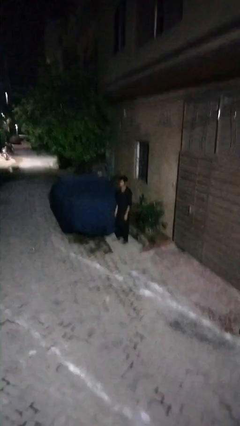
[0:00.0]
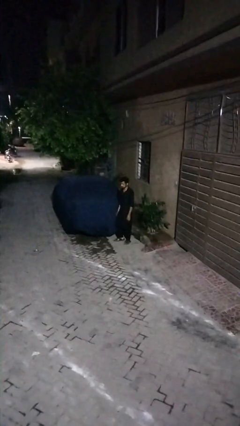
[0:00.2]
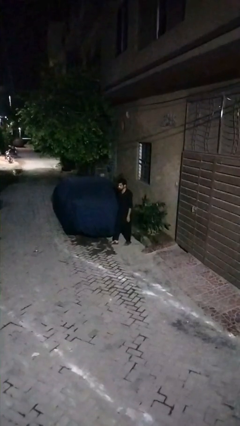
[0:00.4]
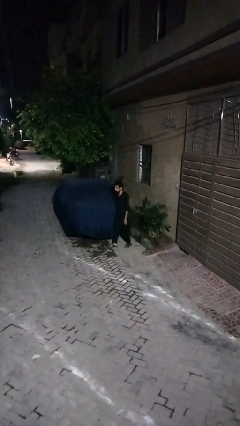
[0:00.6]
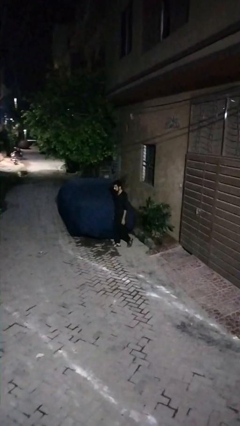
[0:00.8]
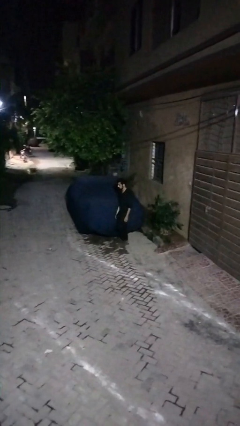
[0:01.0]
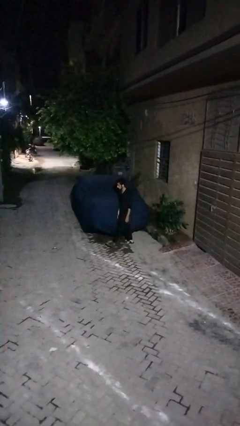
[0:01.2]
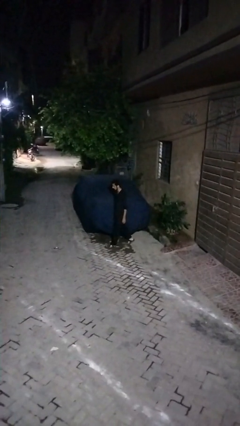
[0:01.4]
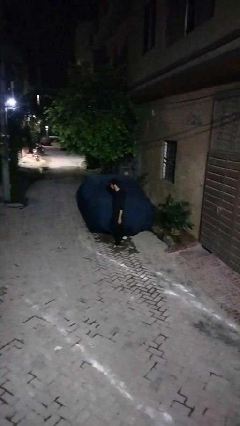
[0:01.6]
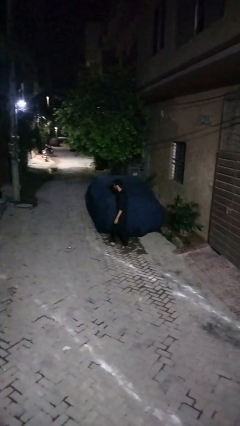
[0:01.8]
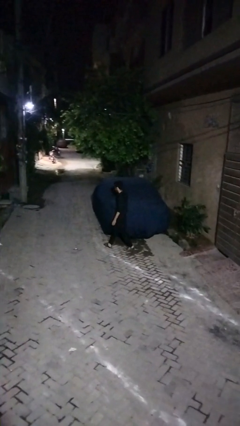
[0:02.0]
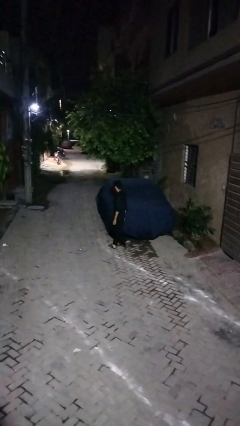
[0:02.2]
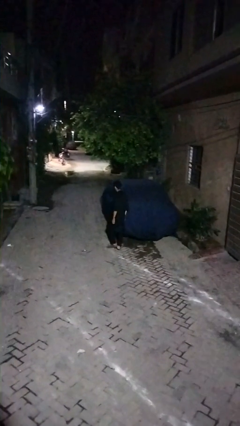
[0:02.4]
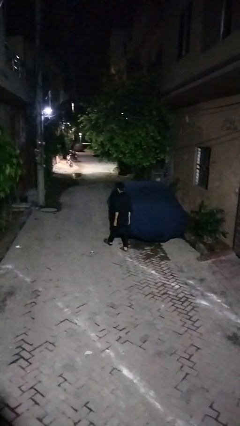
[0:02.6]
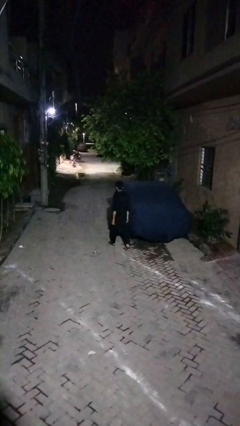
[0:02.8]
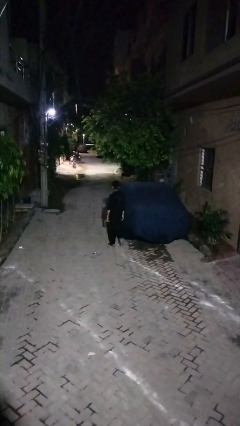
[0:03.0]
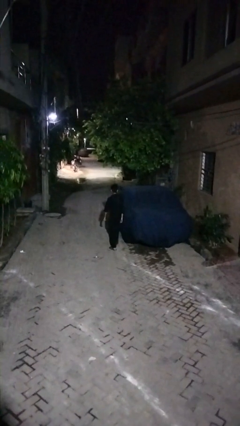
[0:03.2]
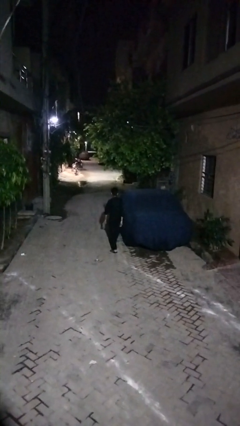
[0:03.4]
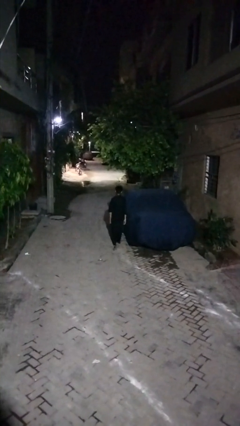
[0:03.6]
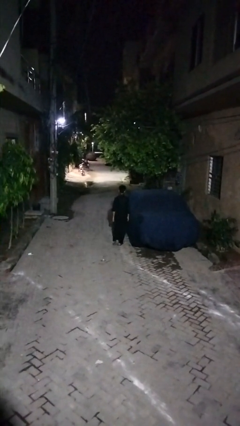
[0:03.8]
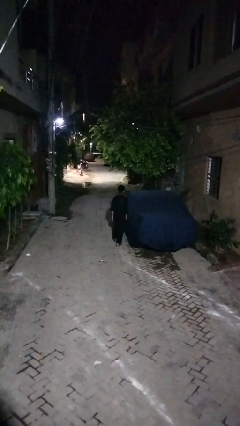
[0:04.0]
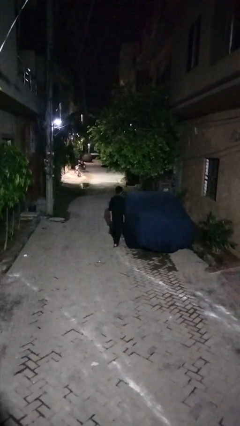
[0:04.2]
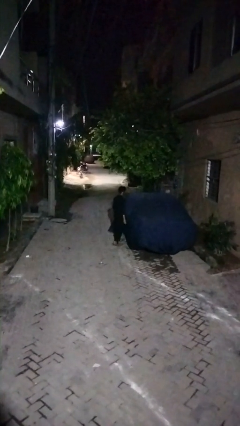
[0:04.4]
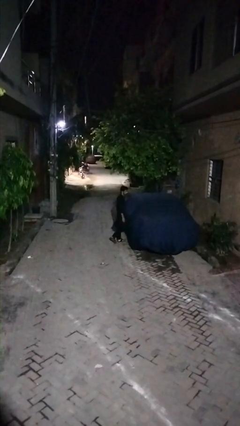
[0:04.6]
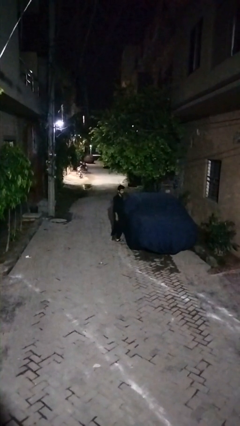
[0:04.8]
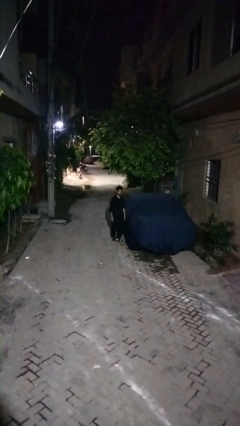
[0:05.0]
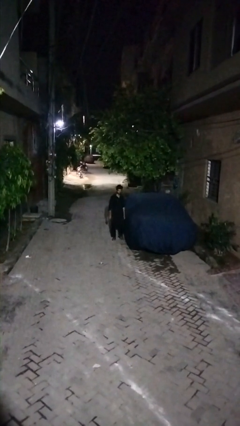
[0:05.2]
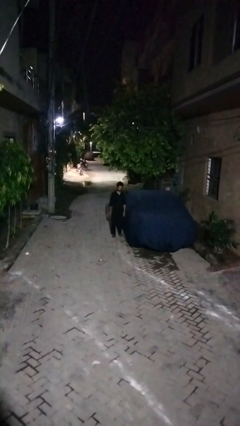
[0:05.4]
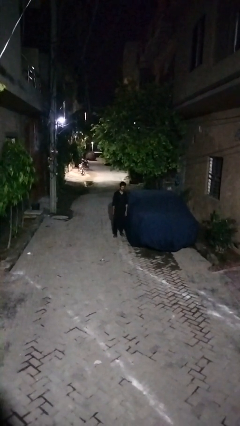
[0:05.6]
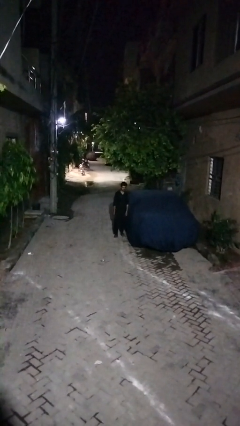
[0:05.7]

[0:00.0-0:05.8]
person walks around car

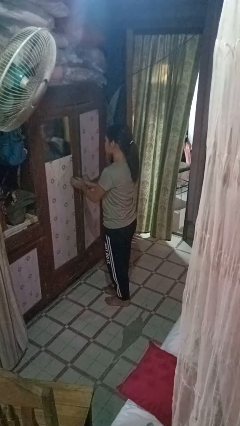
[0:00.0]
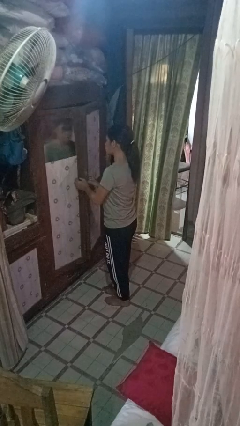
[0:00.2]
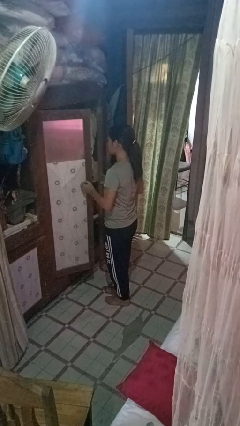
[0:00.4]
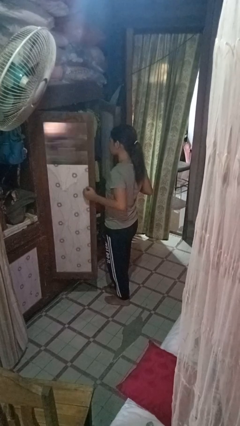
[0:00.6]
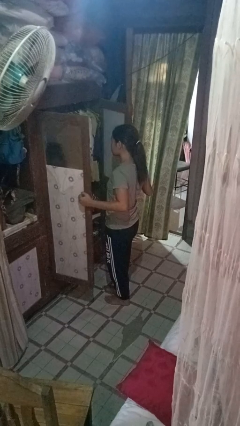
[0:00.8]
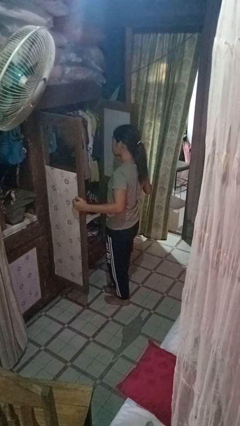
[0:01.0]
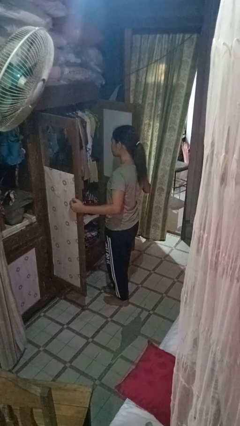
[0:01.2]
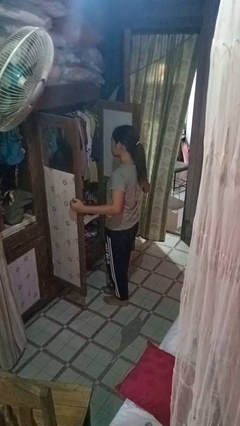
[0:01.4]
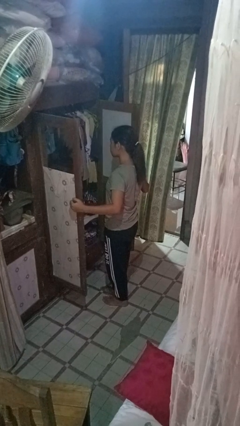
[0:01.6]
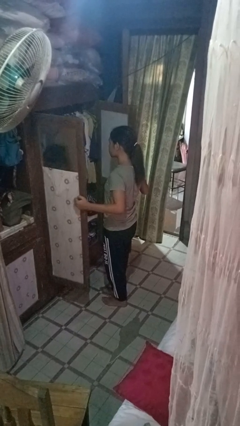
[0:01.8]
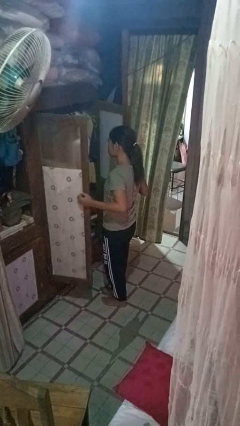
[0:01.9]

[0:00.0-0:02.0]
person opens closet door

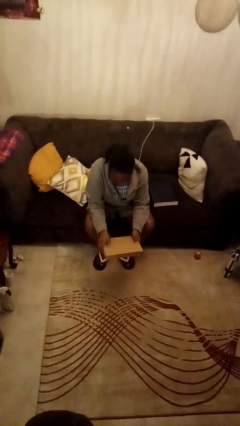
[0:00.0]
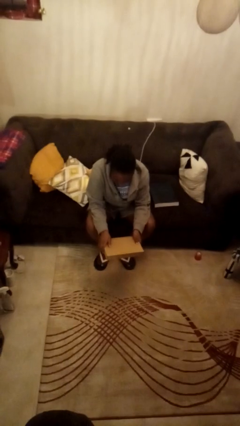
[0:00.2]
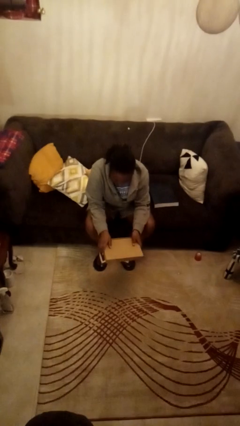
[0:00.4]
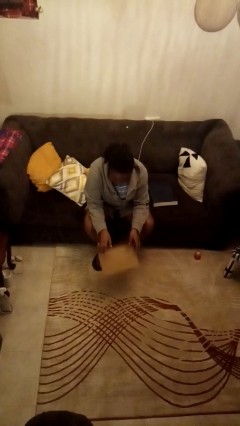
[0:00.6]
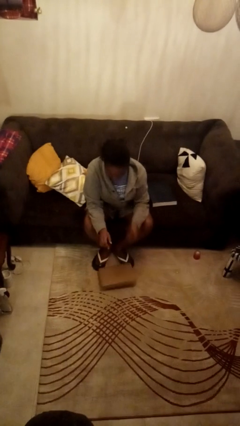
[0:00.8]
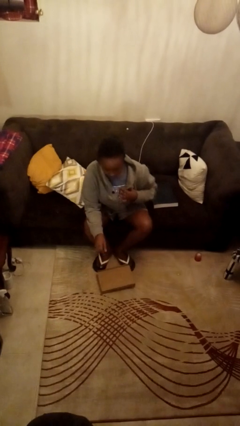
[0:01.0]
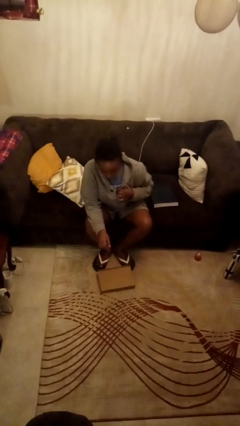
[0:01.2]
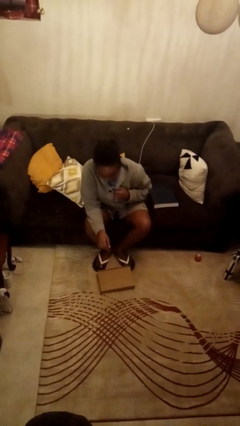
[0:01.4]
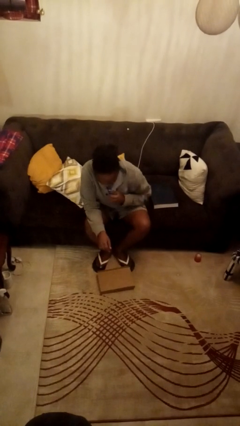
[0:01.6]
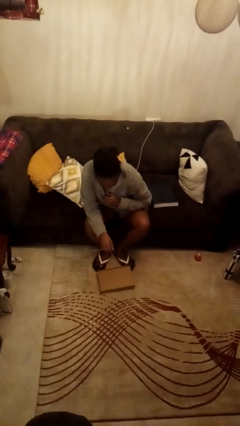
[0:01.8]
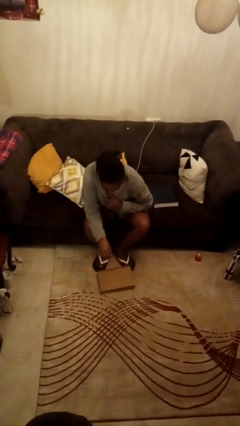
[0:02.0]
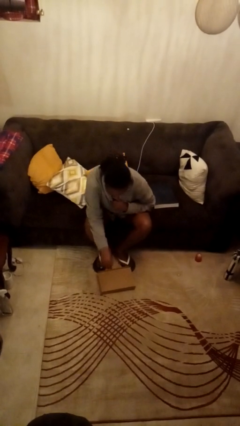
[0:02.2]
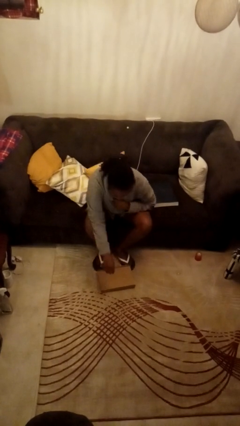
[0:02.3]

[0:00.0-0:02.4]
person drops object

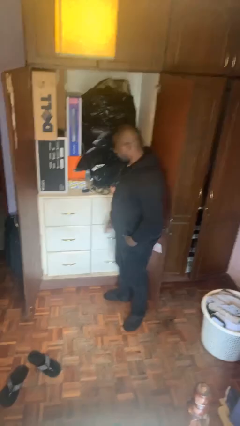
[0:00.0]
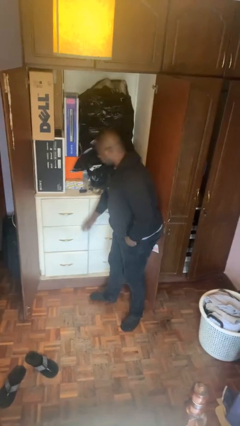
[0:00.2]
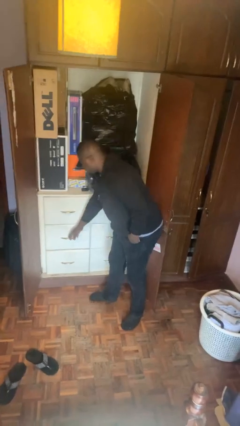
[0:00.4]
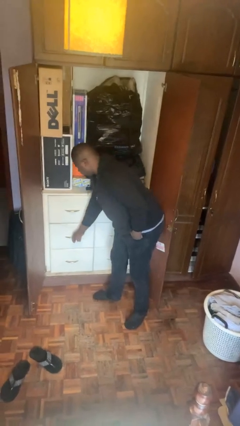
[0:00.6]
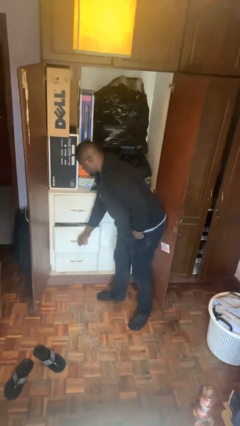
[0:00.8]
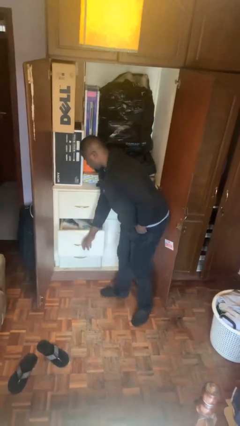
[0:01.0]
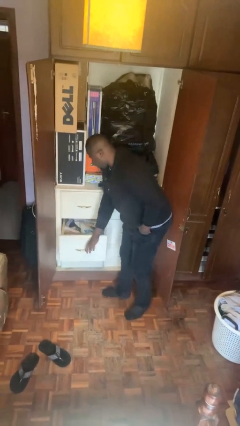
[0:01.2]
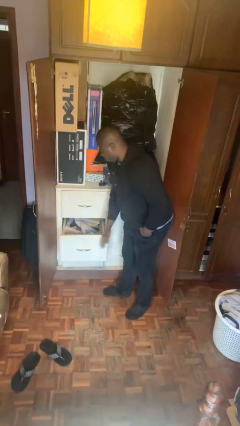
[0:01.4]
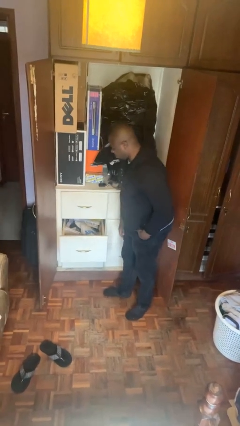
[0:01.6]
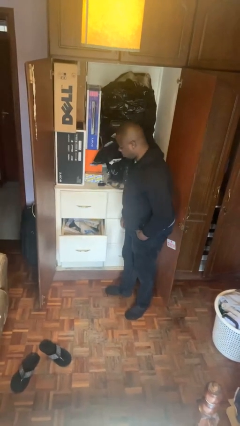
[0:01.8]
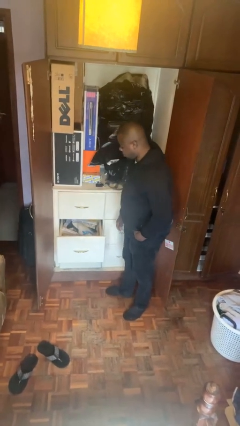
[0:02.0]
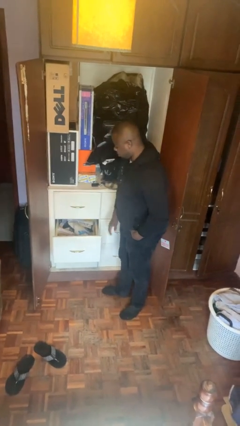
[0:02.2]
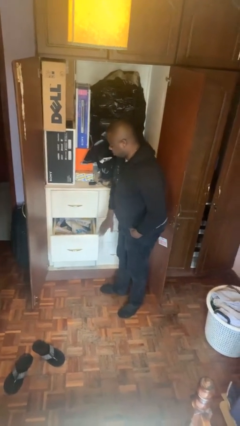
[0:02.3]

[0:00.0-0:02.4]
person opens dresser drawer

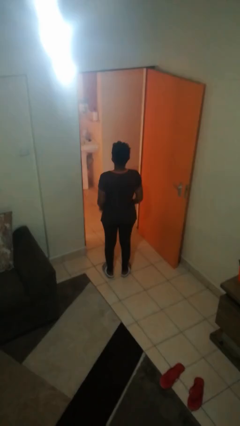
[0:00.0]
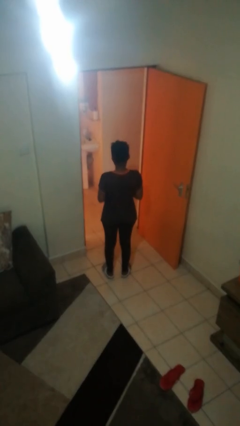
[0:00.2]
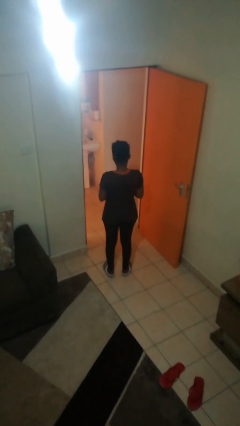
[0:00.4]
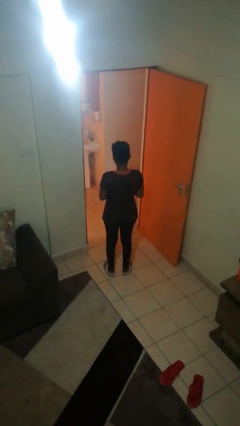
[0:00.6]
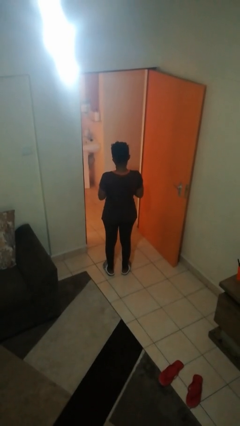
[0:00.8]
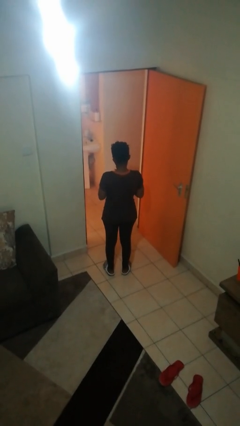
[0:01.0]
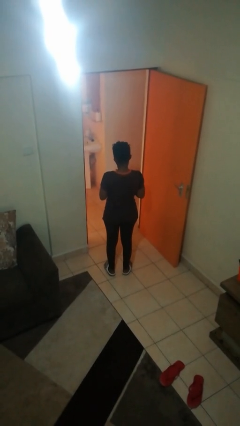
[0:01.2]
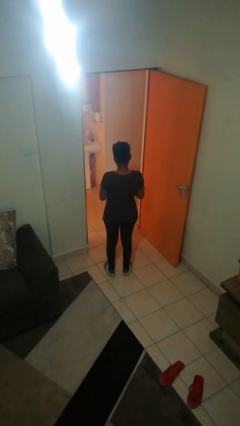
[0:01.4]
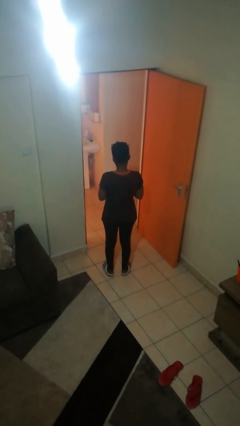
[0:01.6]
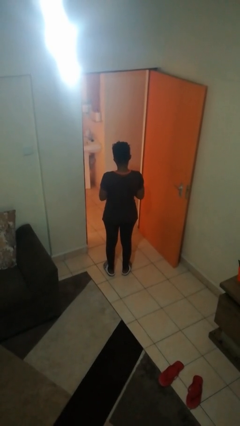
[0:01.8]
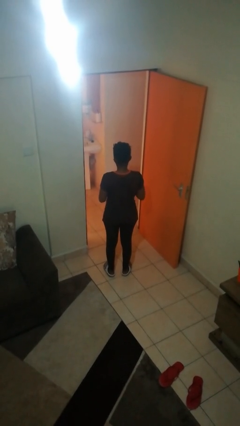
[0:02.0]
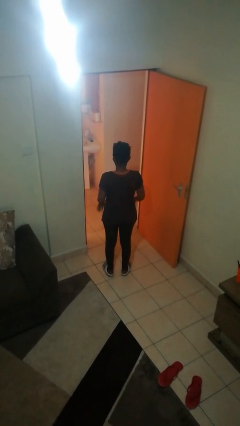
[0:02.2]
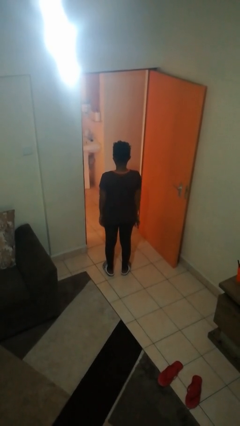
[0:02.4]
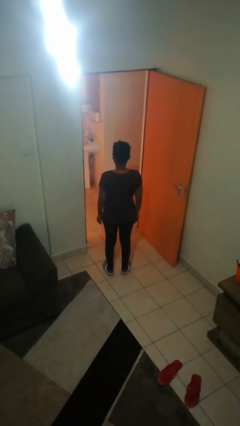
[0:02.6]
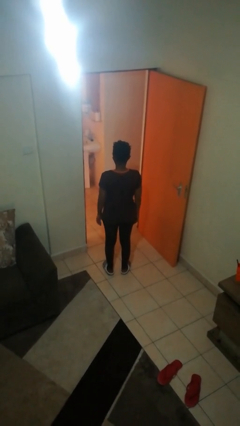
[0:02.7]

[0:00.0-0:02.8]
person puts on ring

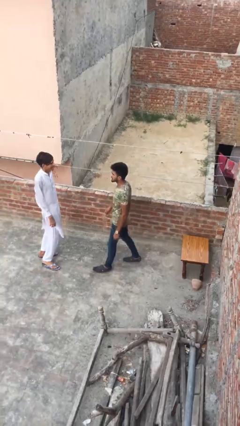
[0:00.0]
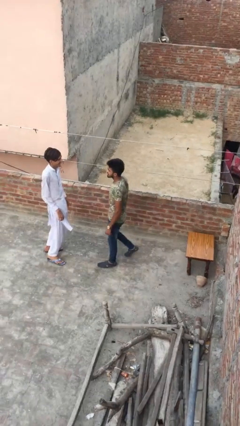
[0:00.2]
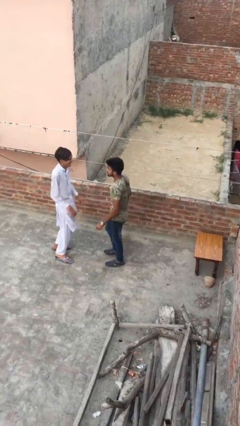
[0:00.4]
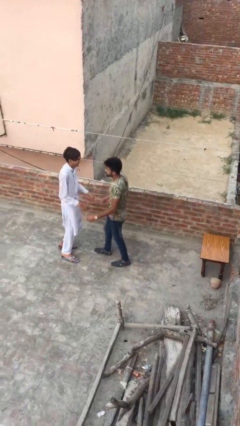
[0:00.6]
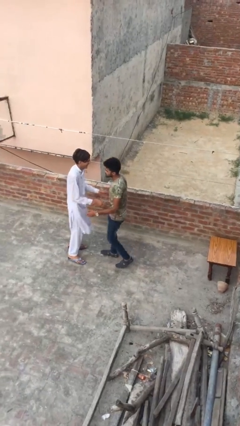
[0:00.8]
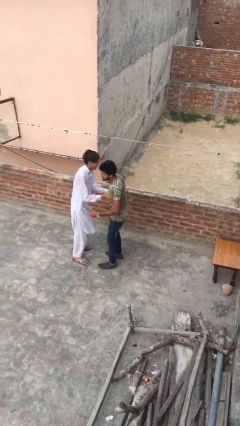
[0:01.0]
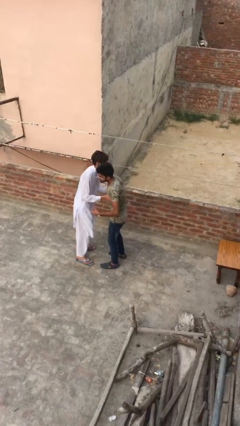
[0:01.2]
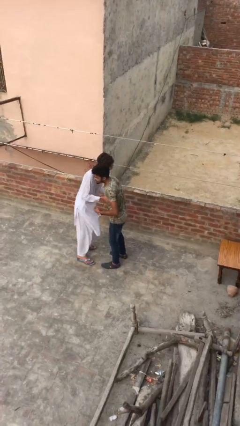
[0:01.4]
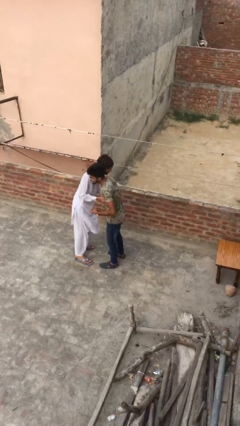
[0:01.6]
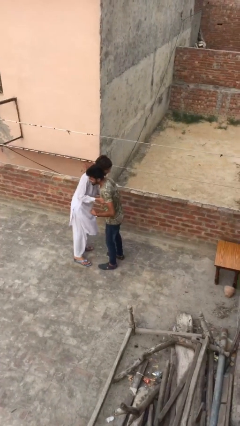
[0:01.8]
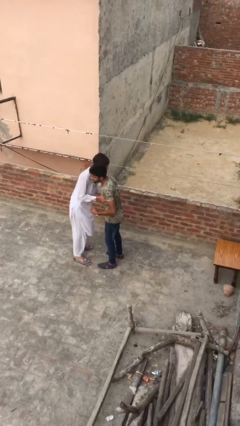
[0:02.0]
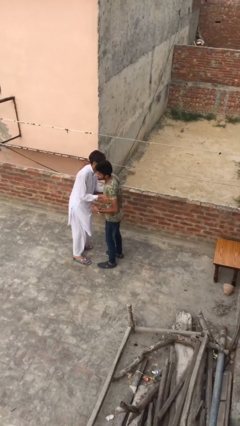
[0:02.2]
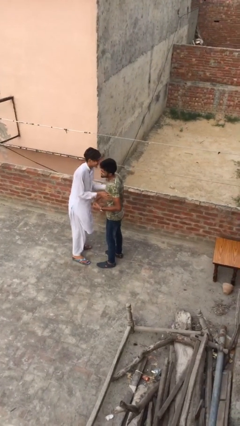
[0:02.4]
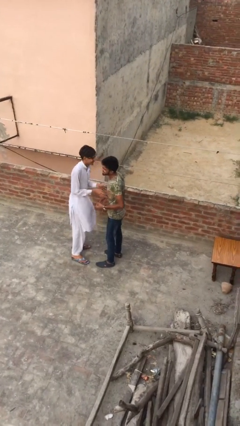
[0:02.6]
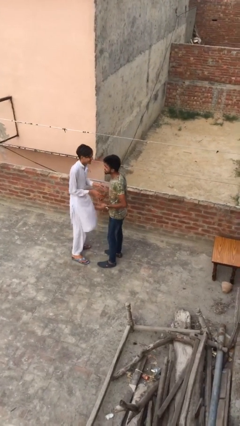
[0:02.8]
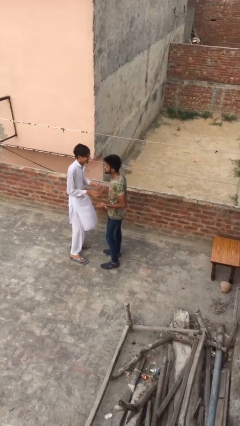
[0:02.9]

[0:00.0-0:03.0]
person embraces person
